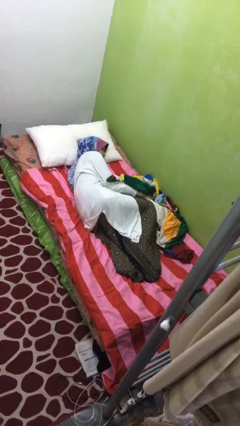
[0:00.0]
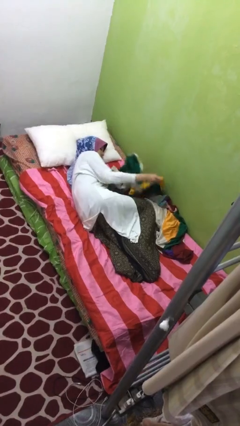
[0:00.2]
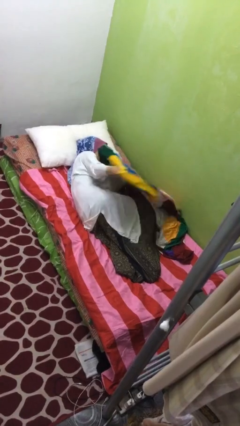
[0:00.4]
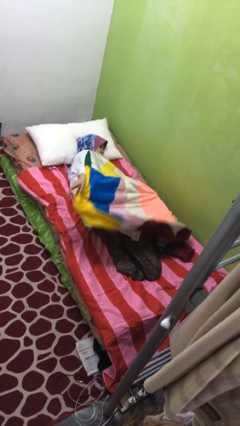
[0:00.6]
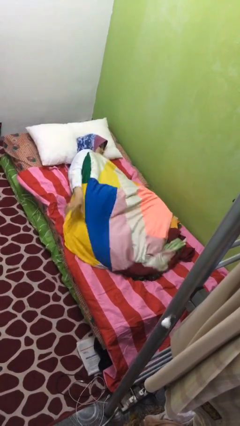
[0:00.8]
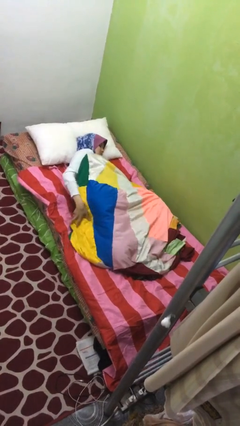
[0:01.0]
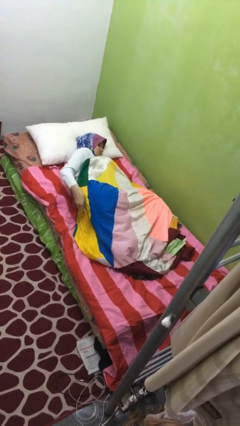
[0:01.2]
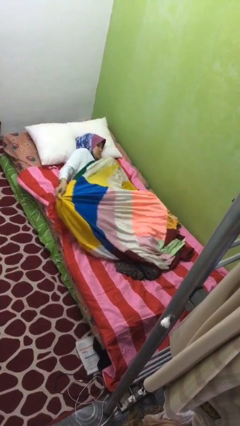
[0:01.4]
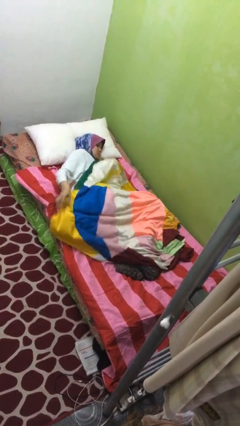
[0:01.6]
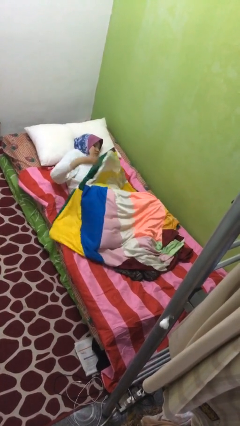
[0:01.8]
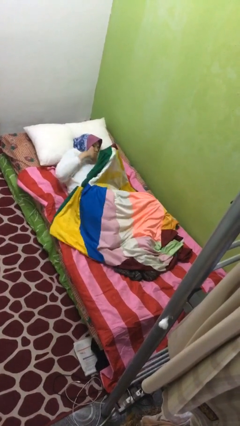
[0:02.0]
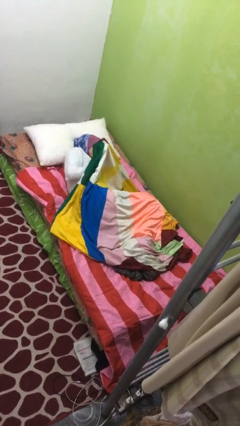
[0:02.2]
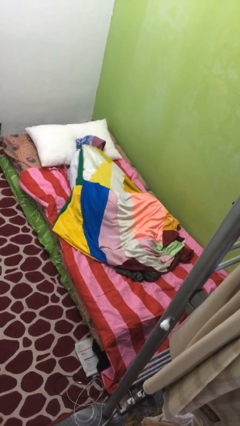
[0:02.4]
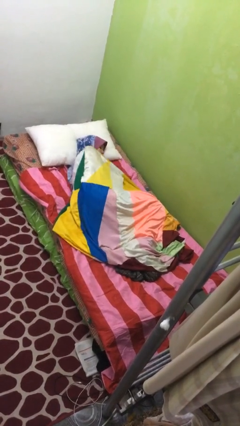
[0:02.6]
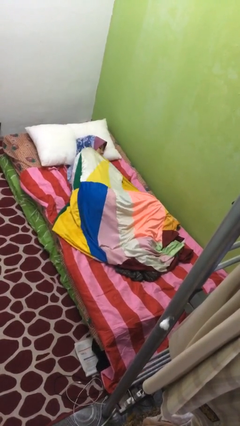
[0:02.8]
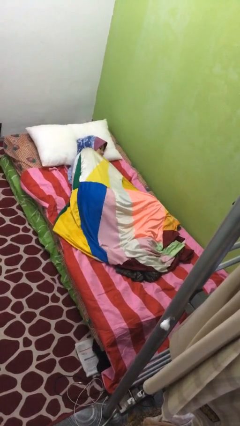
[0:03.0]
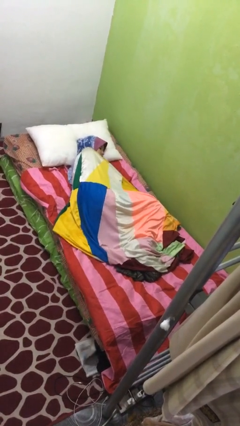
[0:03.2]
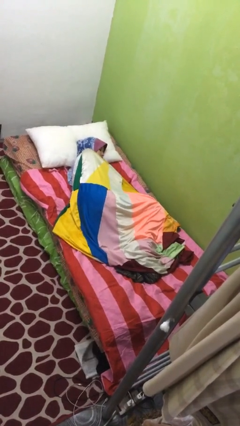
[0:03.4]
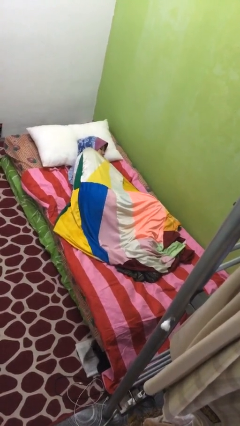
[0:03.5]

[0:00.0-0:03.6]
person covers with blanket

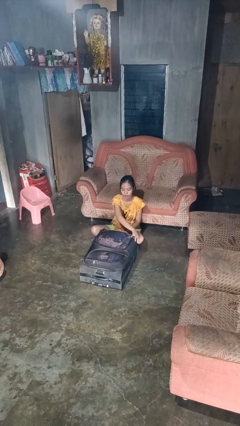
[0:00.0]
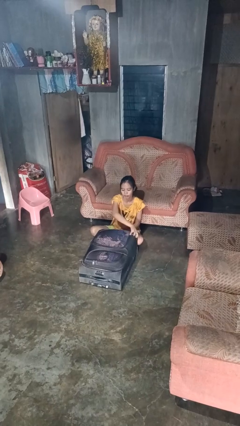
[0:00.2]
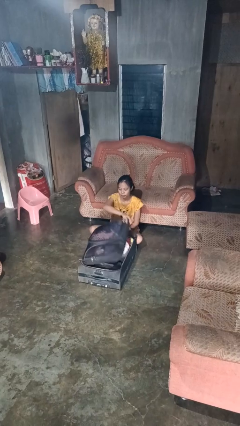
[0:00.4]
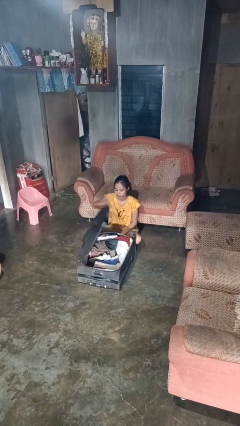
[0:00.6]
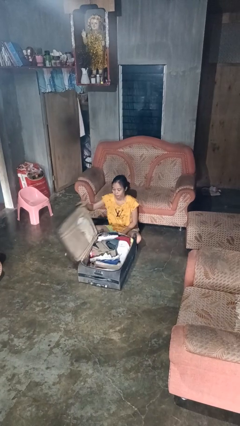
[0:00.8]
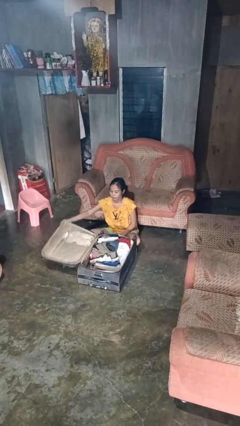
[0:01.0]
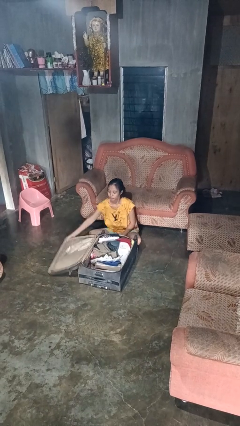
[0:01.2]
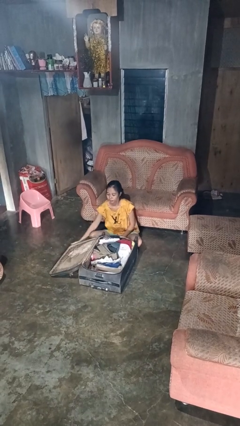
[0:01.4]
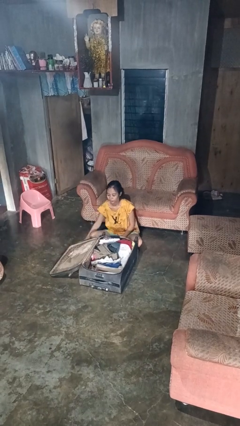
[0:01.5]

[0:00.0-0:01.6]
person opens suitcase

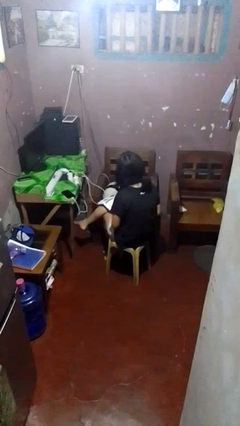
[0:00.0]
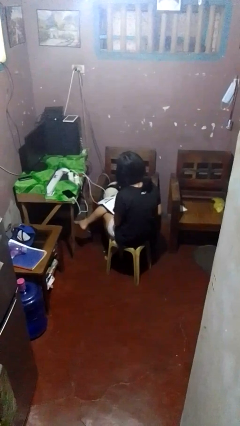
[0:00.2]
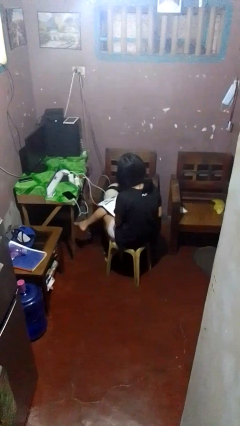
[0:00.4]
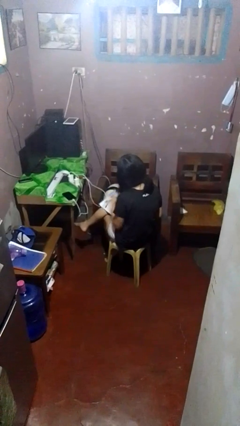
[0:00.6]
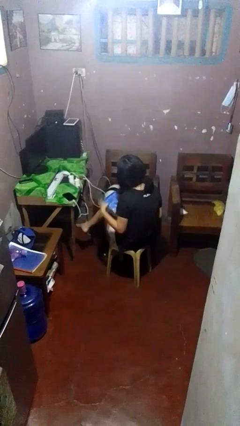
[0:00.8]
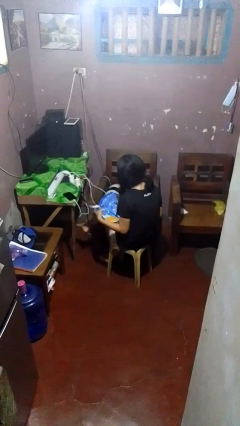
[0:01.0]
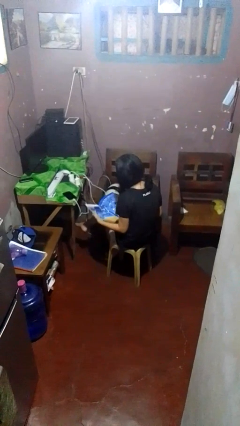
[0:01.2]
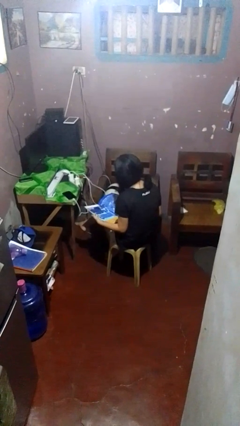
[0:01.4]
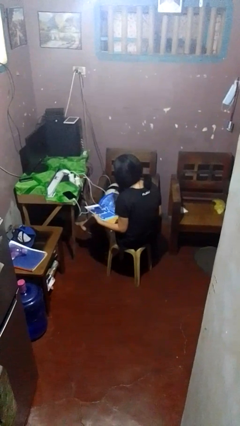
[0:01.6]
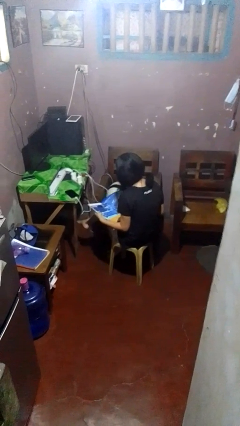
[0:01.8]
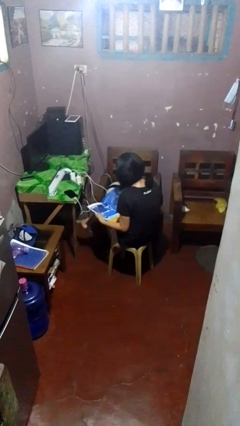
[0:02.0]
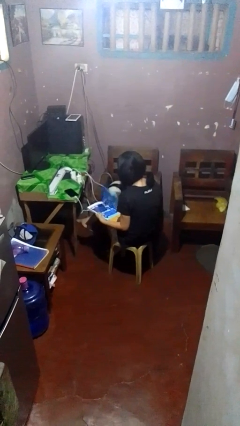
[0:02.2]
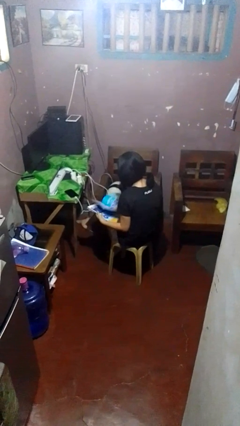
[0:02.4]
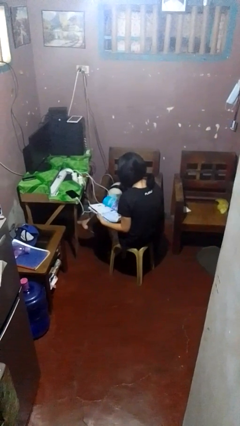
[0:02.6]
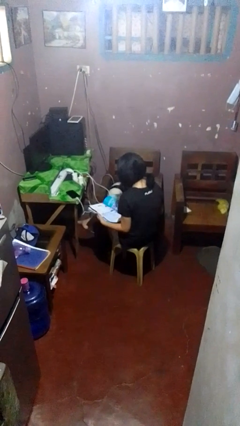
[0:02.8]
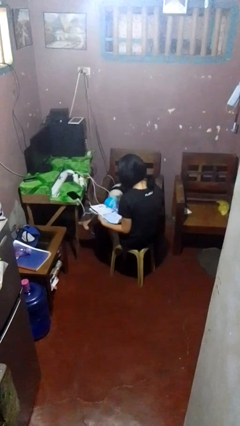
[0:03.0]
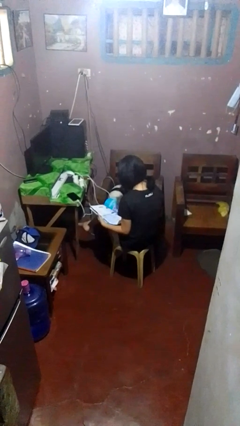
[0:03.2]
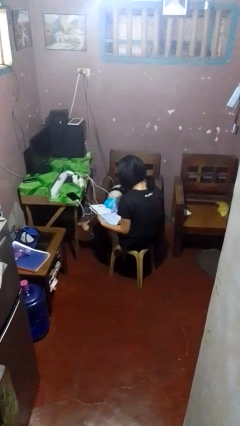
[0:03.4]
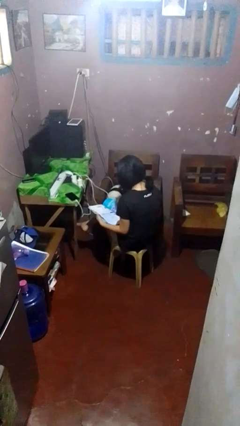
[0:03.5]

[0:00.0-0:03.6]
person reads magazine

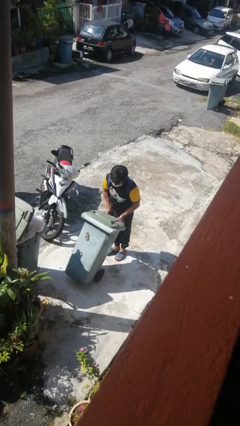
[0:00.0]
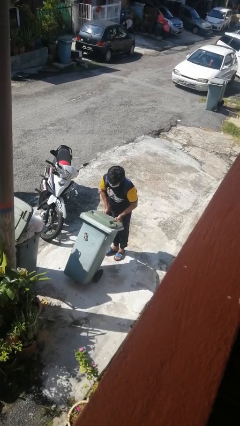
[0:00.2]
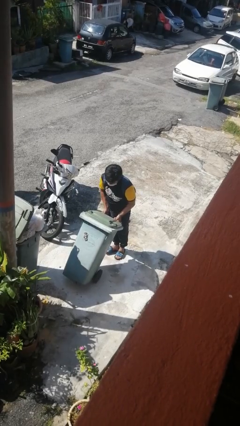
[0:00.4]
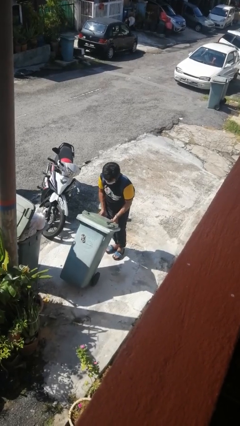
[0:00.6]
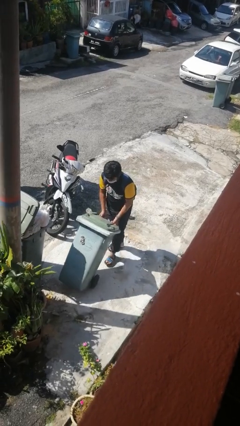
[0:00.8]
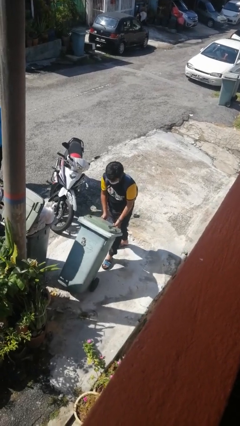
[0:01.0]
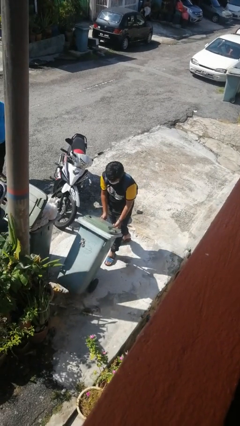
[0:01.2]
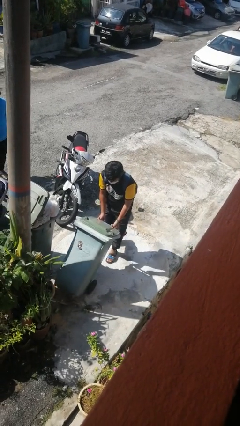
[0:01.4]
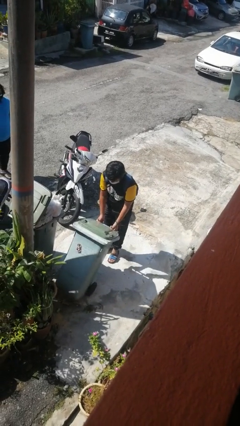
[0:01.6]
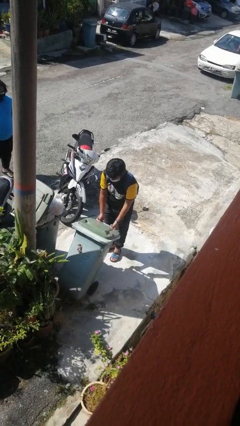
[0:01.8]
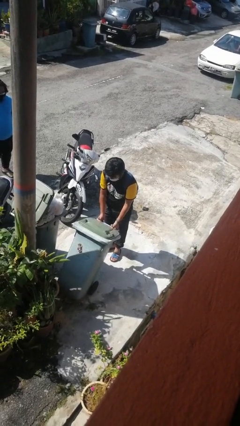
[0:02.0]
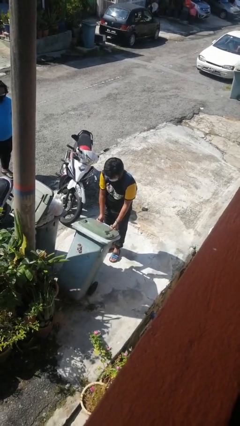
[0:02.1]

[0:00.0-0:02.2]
person pushes wheeled trashcan

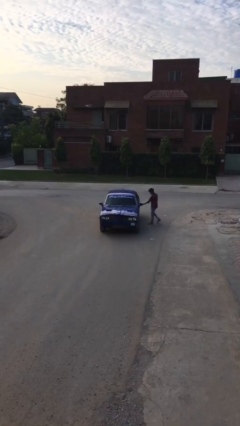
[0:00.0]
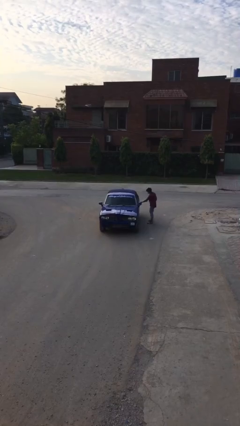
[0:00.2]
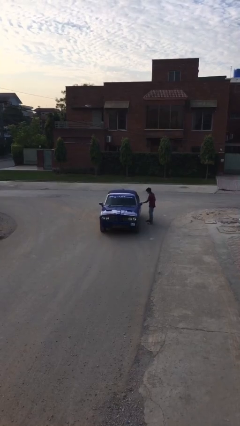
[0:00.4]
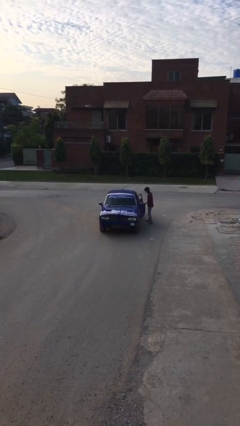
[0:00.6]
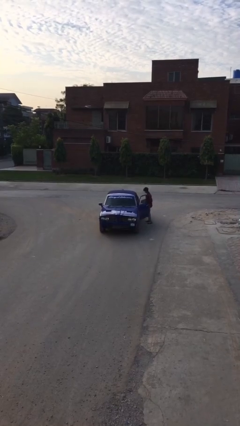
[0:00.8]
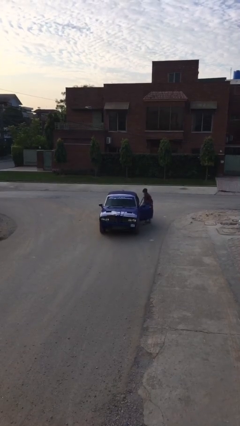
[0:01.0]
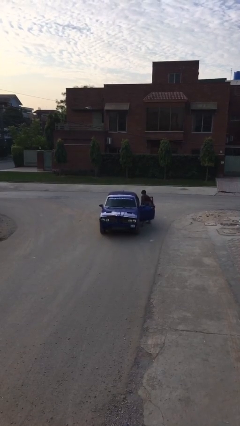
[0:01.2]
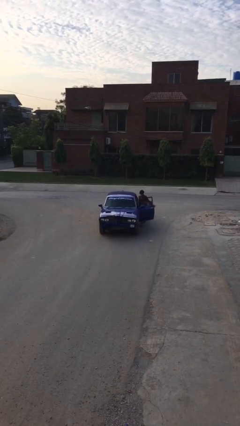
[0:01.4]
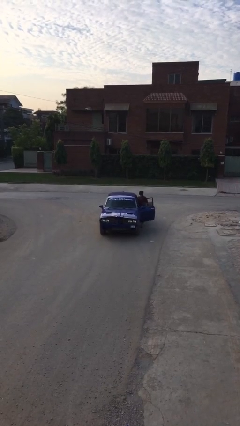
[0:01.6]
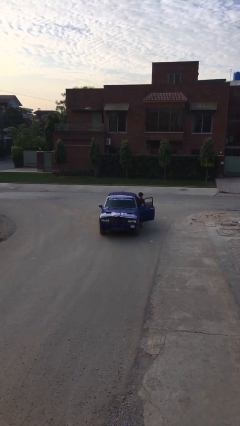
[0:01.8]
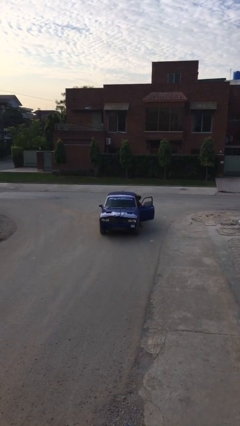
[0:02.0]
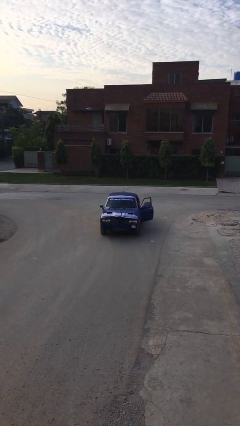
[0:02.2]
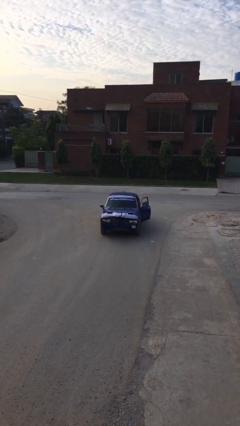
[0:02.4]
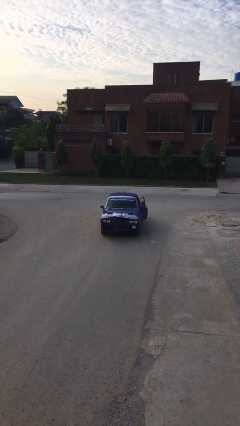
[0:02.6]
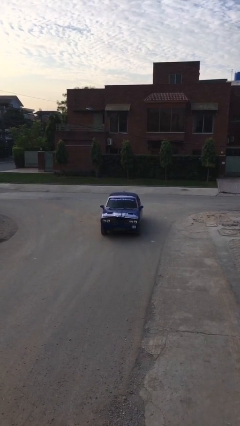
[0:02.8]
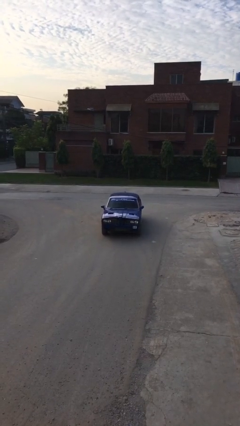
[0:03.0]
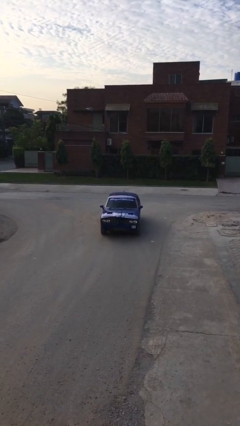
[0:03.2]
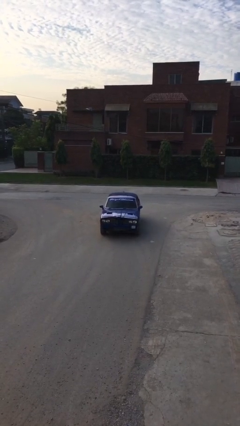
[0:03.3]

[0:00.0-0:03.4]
car picks up person

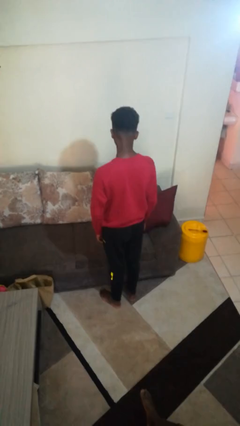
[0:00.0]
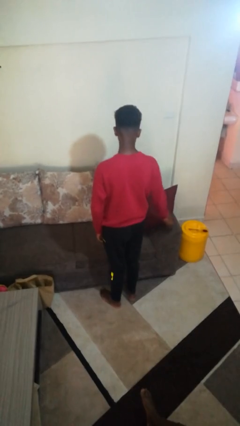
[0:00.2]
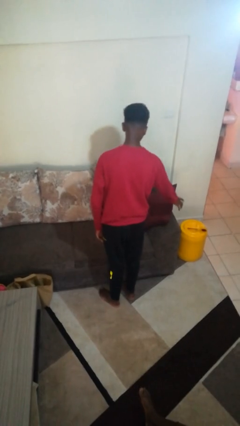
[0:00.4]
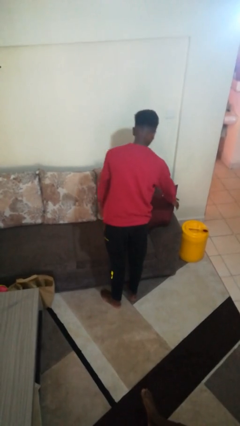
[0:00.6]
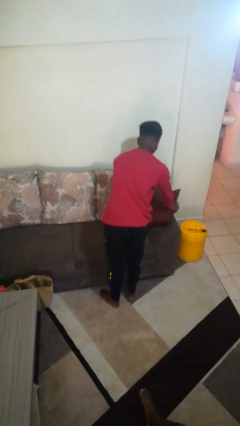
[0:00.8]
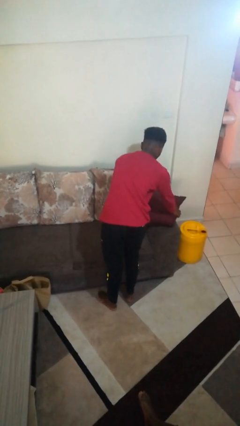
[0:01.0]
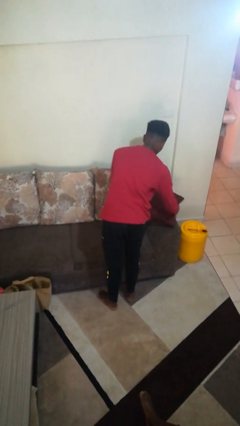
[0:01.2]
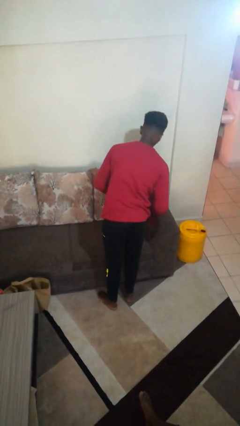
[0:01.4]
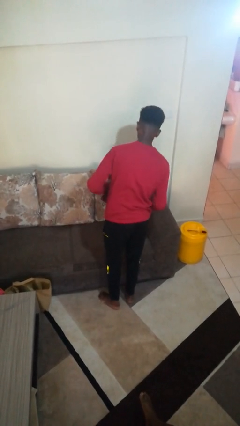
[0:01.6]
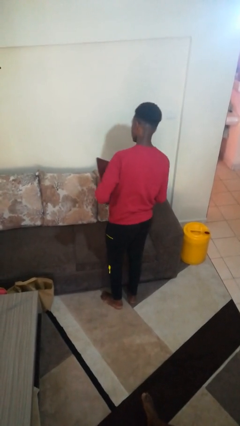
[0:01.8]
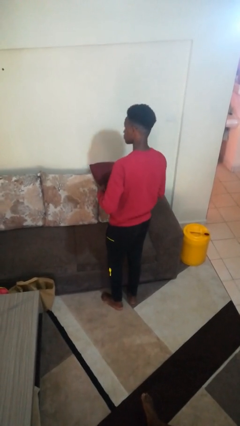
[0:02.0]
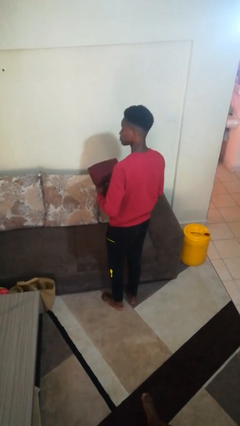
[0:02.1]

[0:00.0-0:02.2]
person picks up object from couch

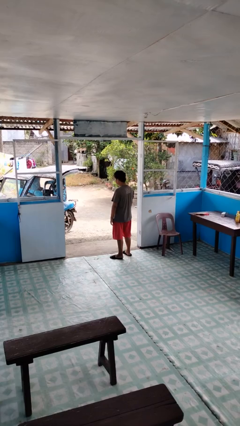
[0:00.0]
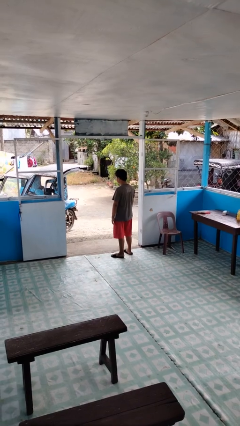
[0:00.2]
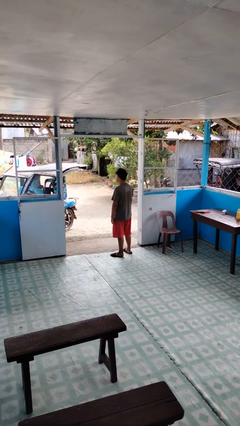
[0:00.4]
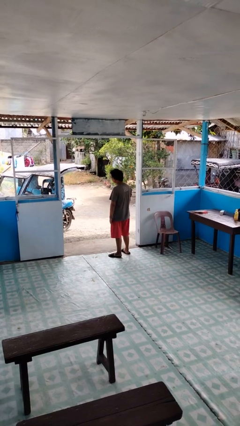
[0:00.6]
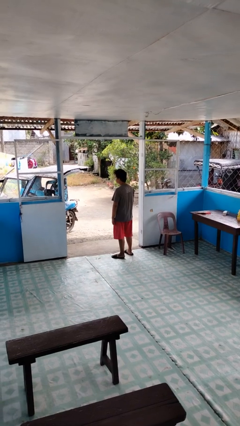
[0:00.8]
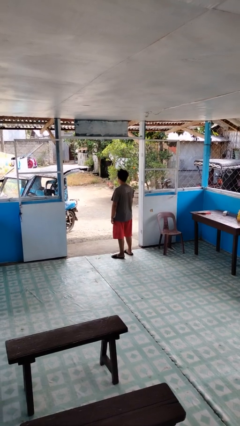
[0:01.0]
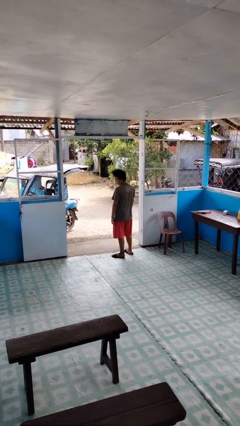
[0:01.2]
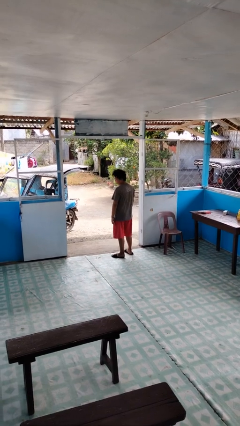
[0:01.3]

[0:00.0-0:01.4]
person shakes head
